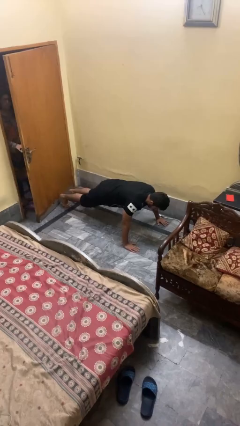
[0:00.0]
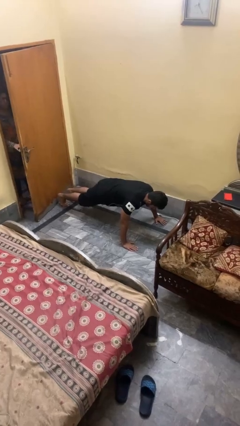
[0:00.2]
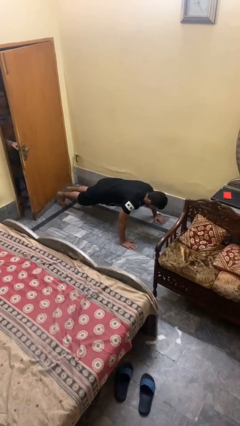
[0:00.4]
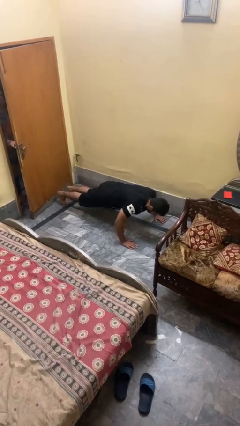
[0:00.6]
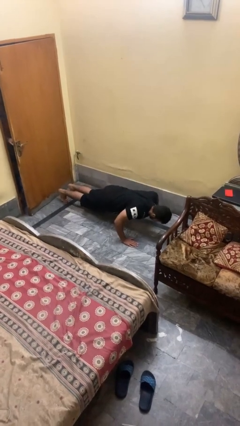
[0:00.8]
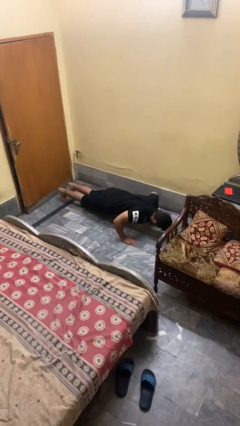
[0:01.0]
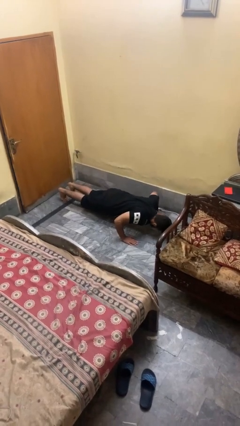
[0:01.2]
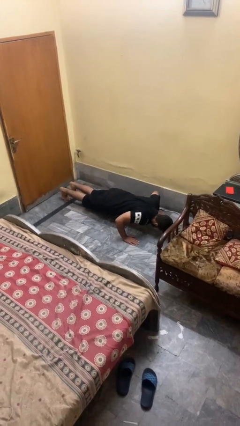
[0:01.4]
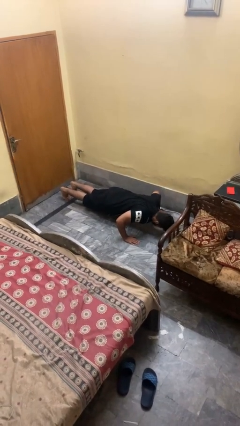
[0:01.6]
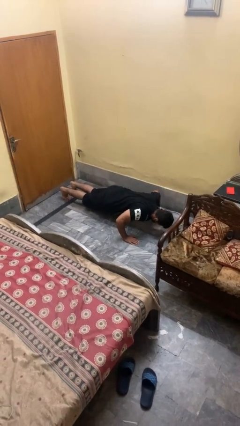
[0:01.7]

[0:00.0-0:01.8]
person exercises with pushup

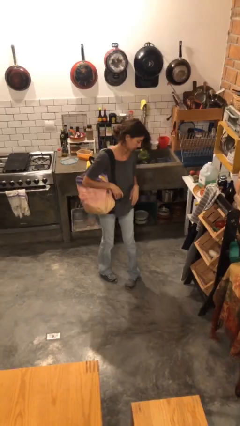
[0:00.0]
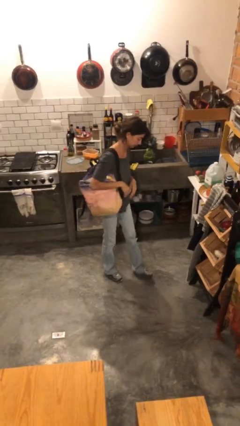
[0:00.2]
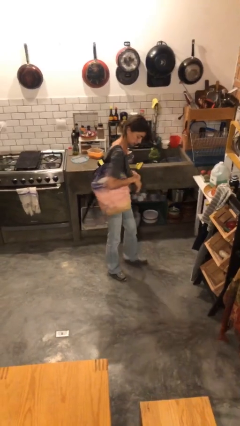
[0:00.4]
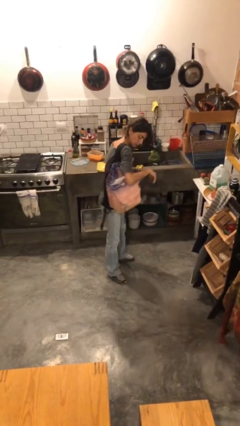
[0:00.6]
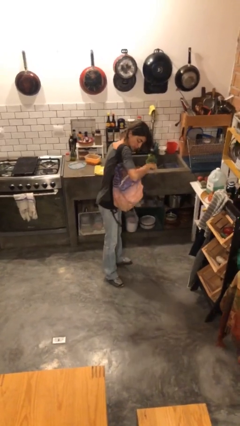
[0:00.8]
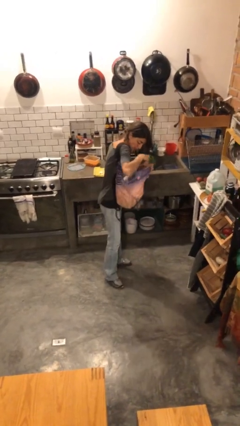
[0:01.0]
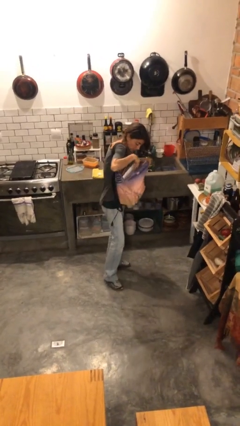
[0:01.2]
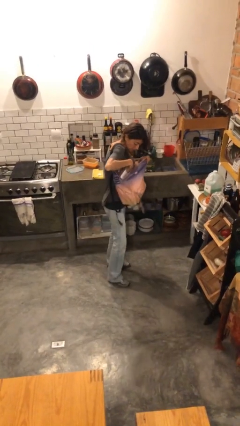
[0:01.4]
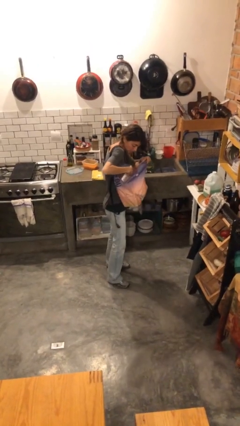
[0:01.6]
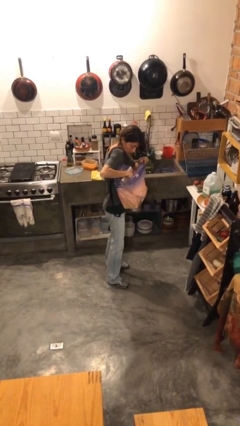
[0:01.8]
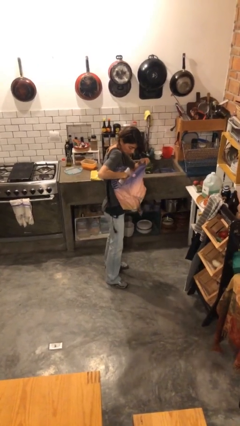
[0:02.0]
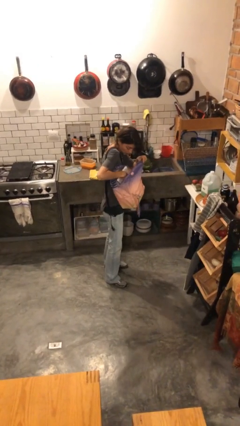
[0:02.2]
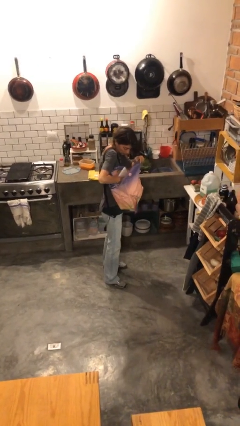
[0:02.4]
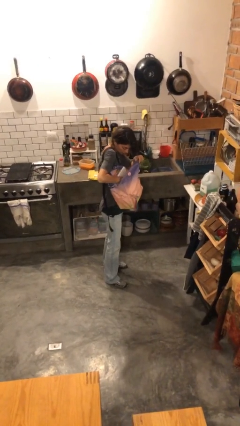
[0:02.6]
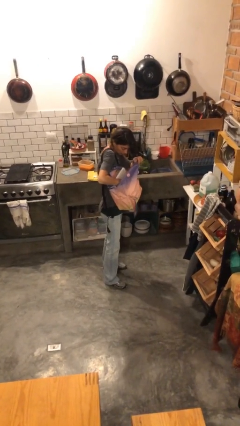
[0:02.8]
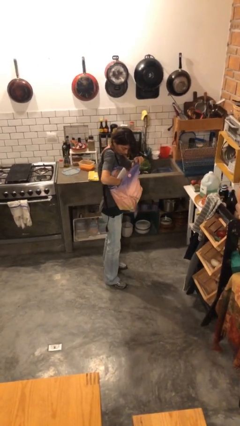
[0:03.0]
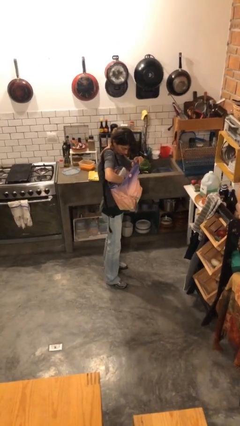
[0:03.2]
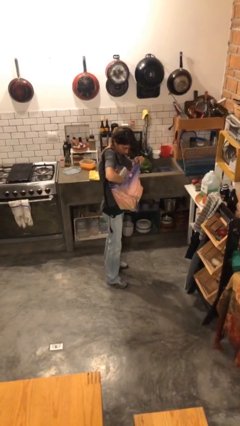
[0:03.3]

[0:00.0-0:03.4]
person searches in backpack

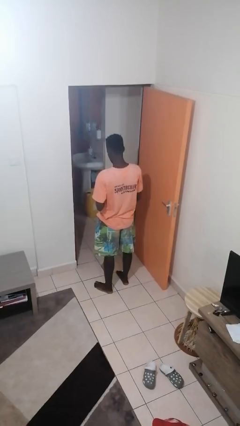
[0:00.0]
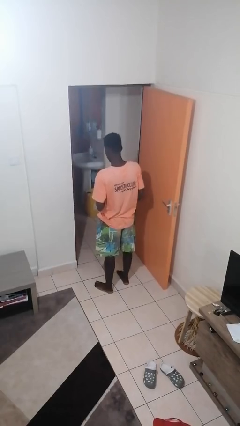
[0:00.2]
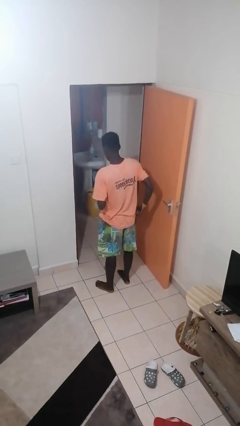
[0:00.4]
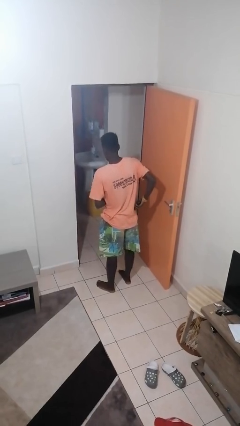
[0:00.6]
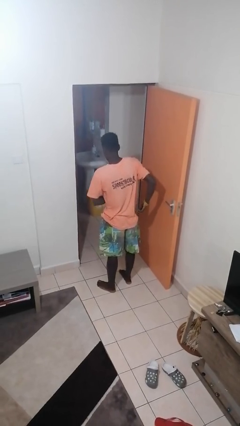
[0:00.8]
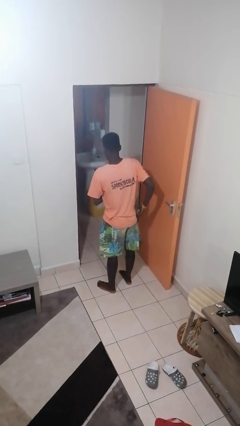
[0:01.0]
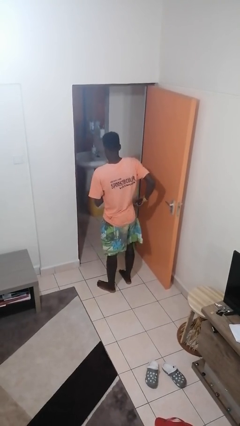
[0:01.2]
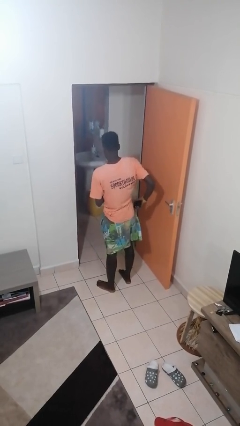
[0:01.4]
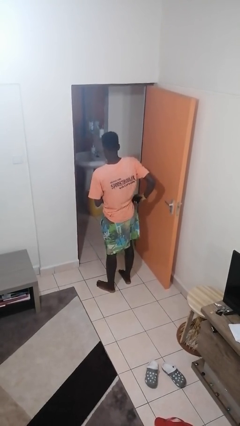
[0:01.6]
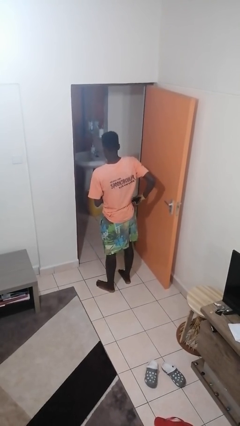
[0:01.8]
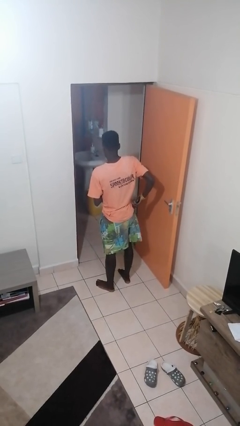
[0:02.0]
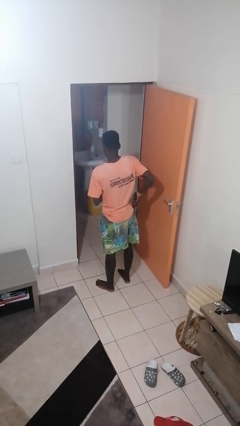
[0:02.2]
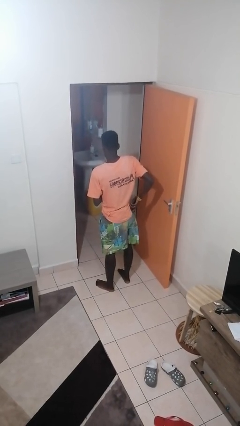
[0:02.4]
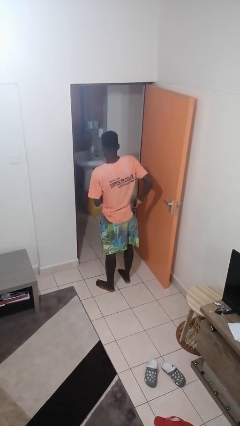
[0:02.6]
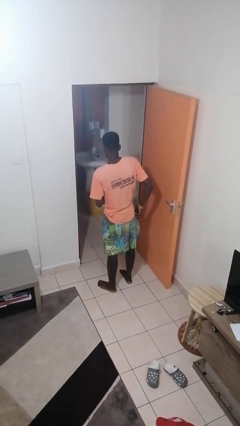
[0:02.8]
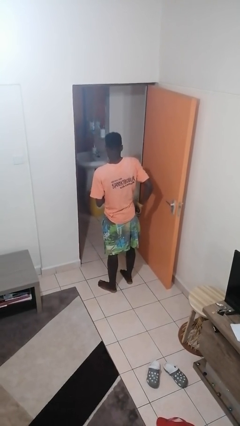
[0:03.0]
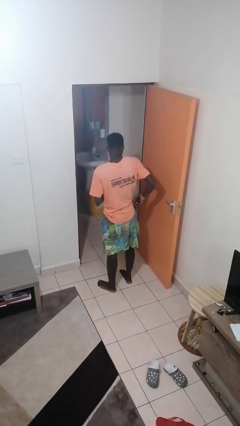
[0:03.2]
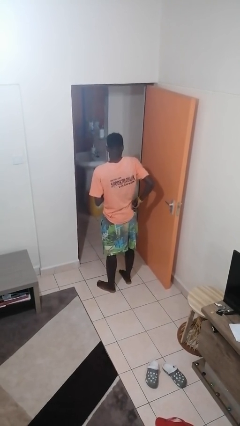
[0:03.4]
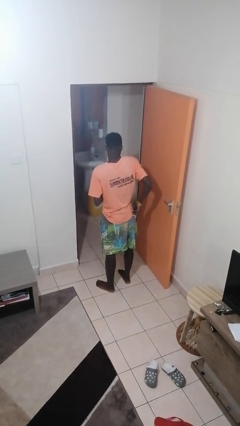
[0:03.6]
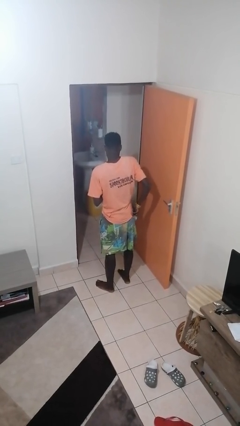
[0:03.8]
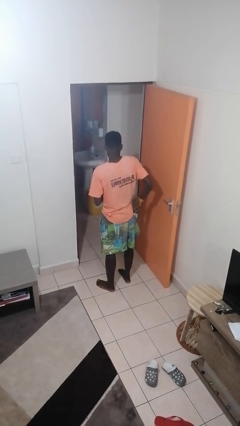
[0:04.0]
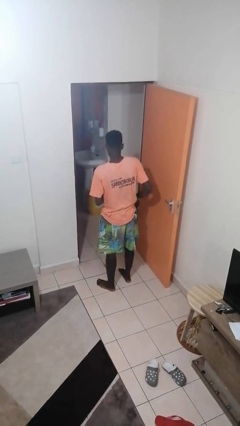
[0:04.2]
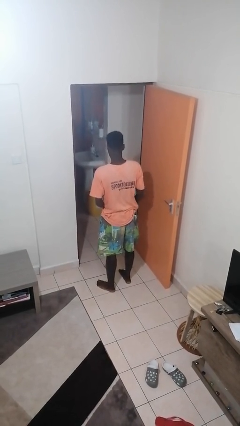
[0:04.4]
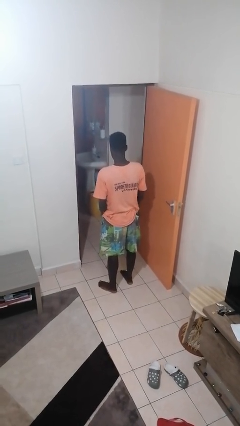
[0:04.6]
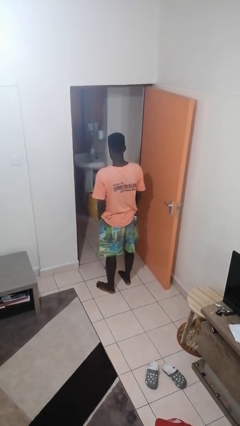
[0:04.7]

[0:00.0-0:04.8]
person puts phone into pocket

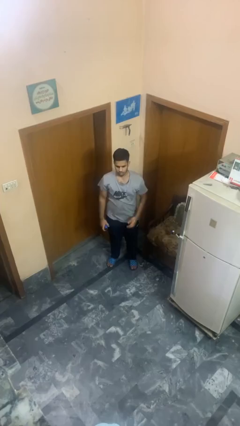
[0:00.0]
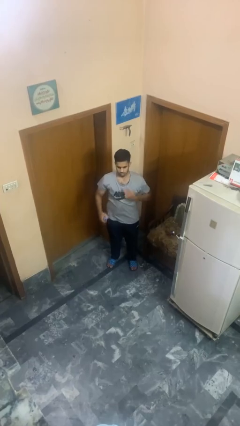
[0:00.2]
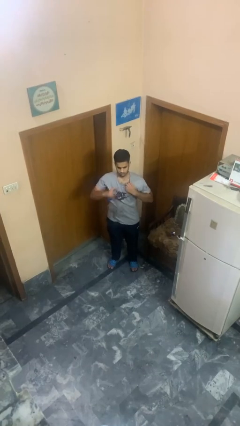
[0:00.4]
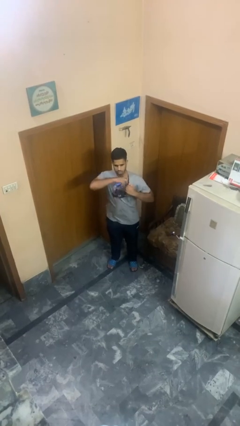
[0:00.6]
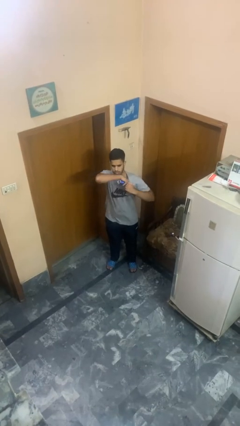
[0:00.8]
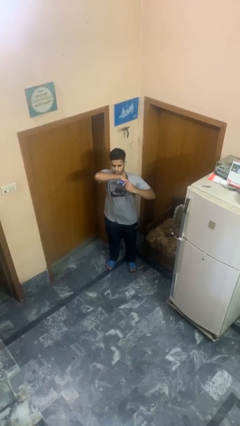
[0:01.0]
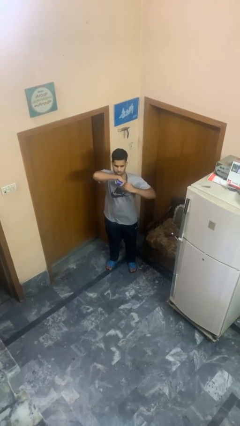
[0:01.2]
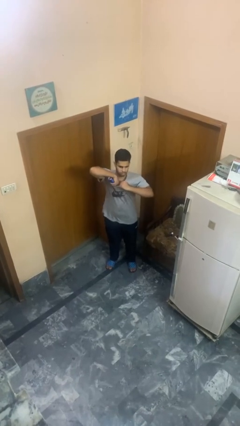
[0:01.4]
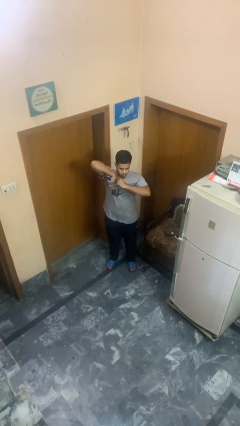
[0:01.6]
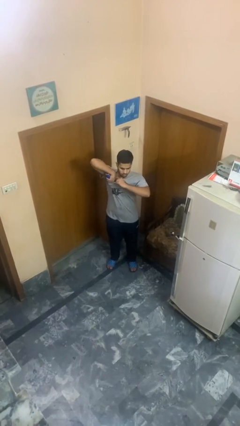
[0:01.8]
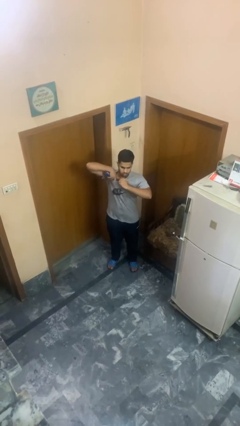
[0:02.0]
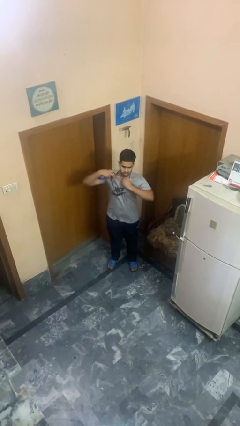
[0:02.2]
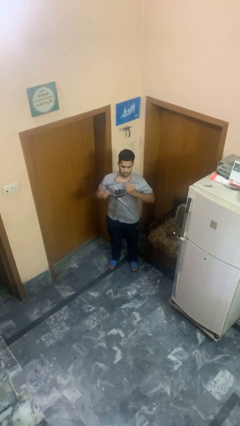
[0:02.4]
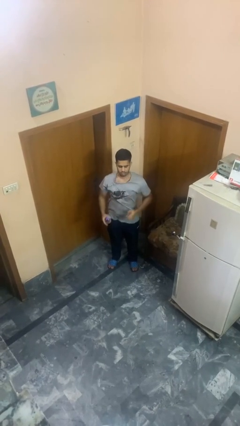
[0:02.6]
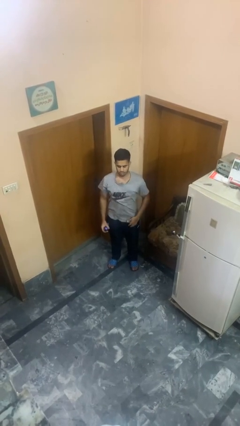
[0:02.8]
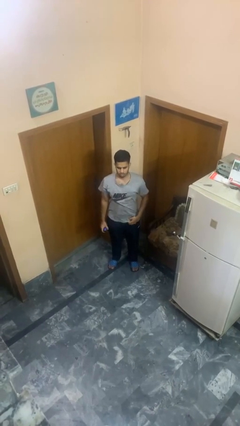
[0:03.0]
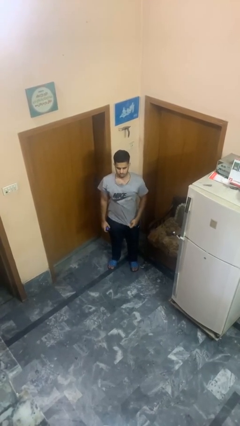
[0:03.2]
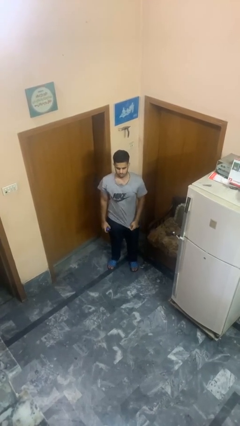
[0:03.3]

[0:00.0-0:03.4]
person applies deodorant

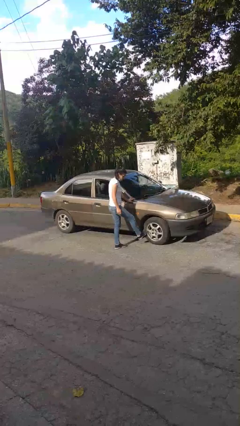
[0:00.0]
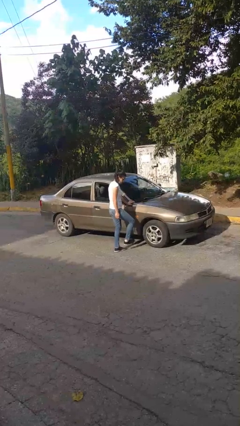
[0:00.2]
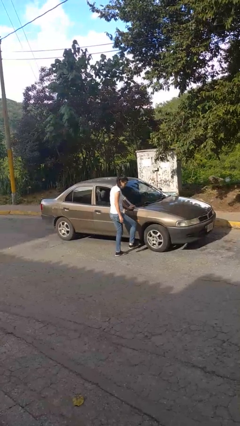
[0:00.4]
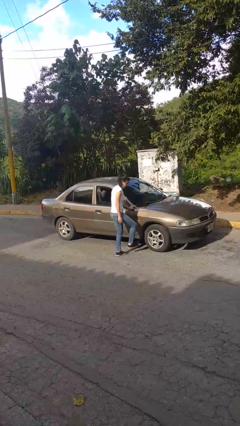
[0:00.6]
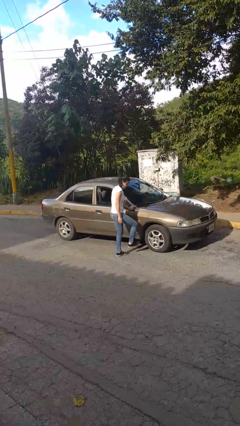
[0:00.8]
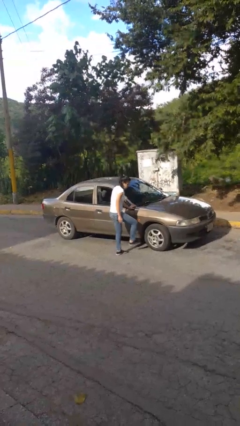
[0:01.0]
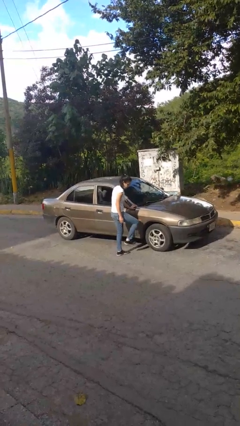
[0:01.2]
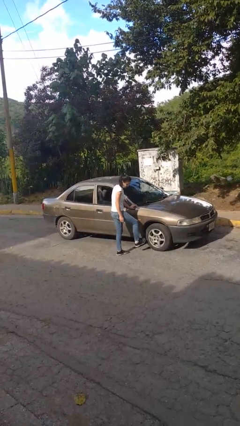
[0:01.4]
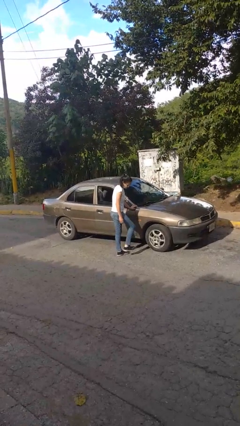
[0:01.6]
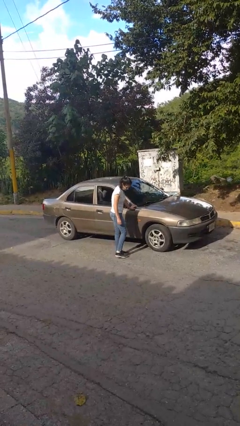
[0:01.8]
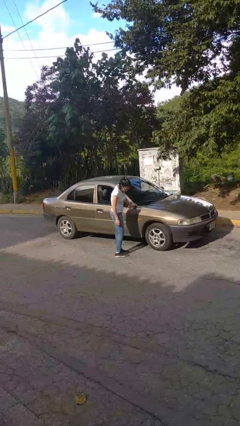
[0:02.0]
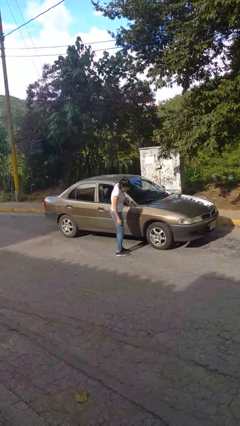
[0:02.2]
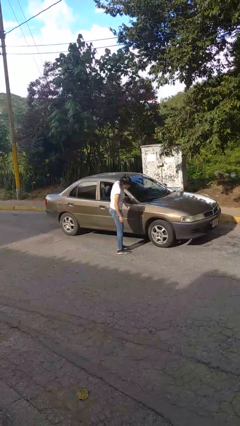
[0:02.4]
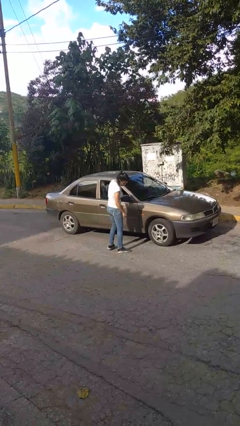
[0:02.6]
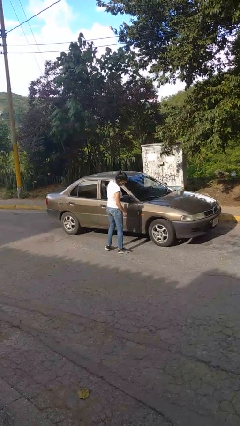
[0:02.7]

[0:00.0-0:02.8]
person kicks car tires

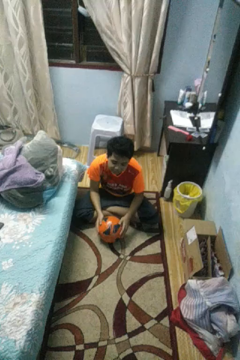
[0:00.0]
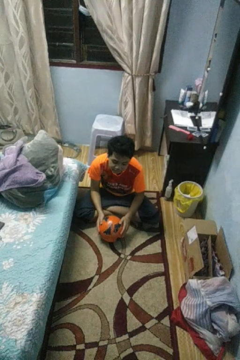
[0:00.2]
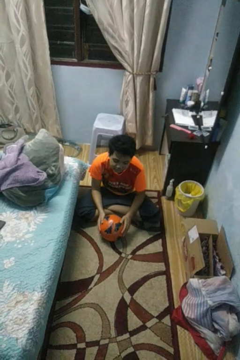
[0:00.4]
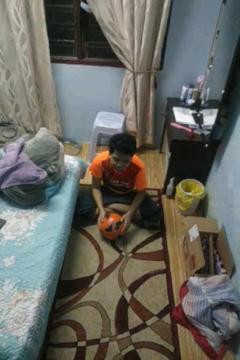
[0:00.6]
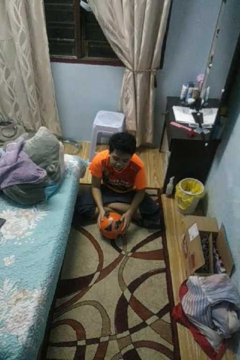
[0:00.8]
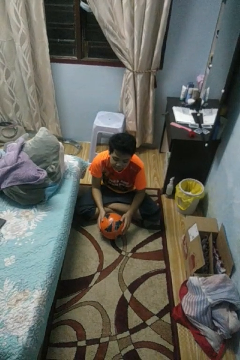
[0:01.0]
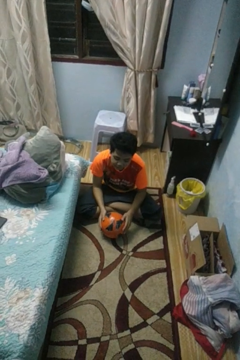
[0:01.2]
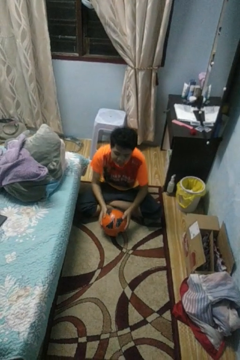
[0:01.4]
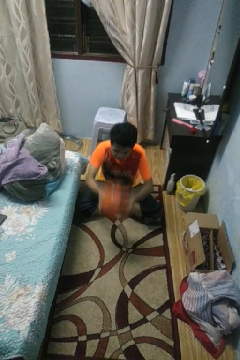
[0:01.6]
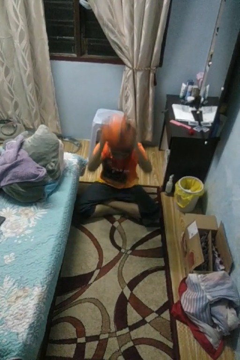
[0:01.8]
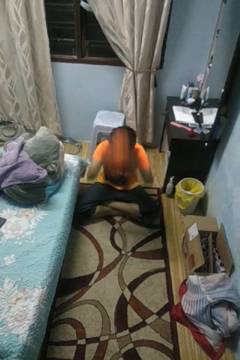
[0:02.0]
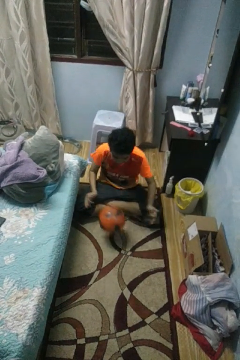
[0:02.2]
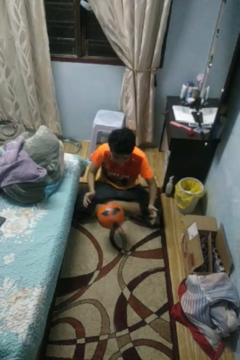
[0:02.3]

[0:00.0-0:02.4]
person bounces ball on floor
